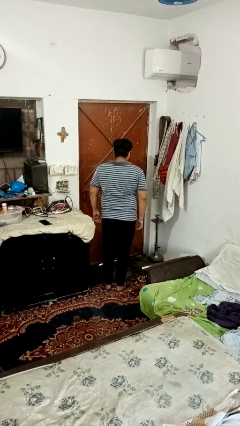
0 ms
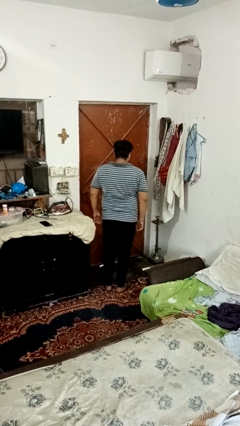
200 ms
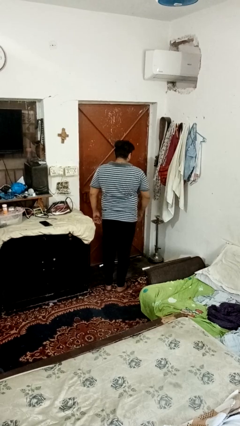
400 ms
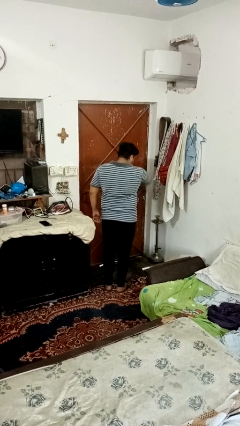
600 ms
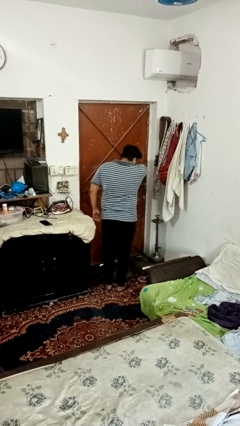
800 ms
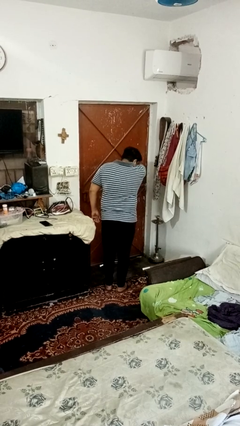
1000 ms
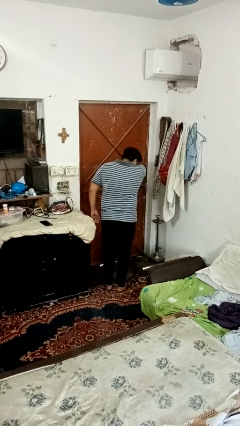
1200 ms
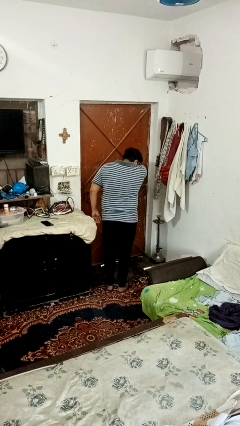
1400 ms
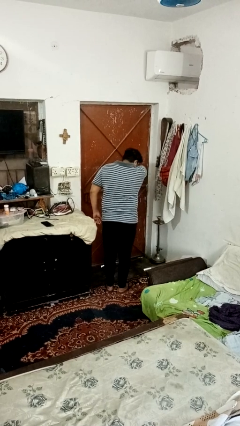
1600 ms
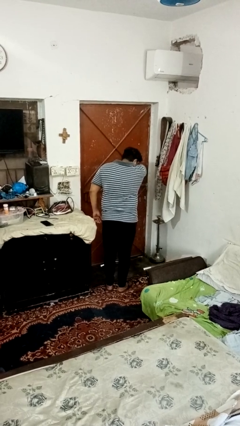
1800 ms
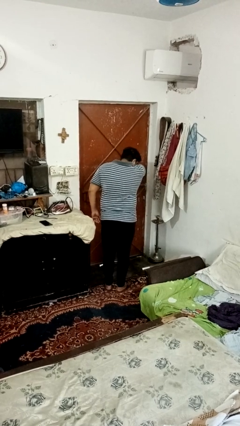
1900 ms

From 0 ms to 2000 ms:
person sneezes into arm

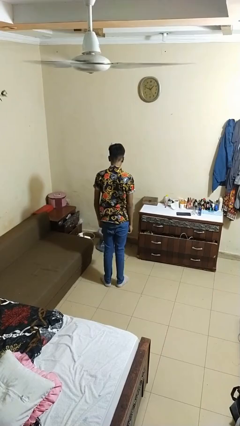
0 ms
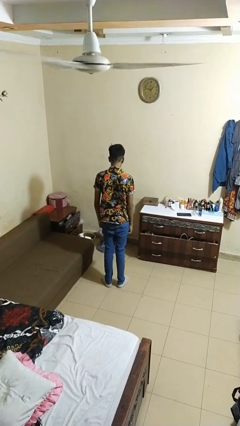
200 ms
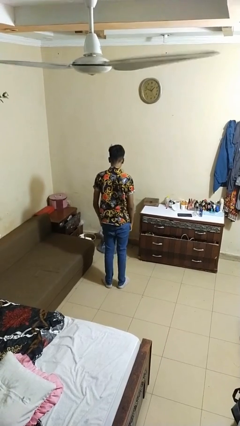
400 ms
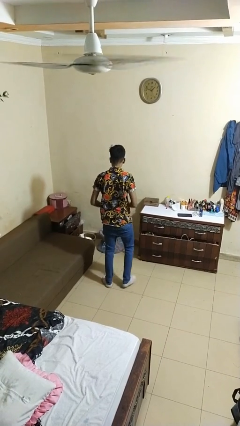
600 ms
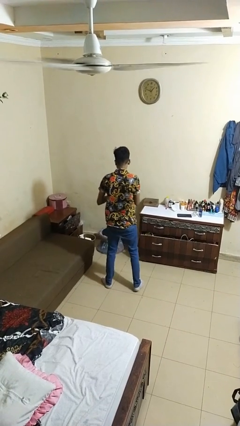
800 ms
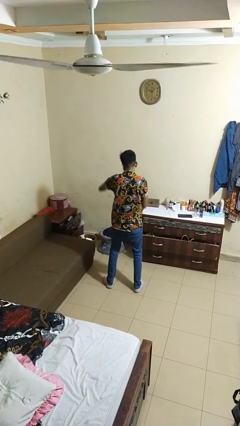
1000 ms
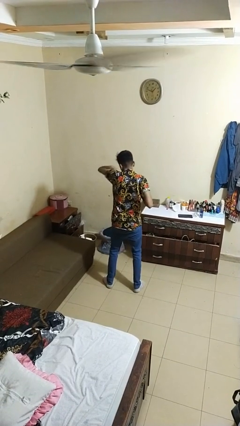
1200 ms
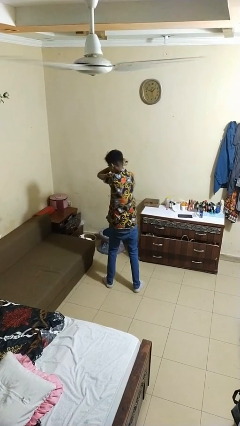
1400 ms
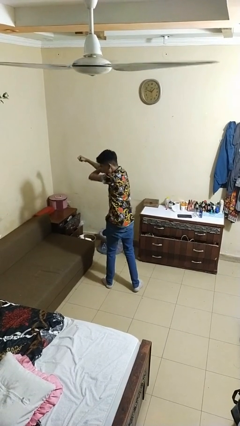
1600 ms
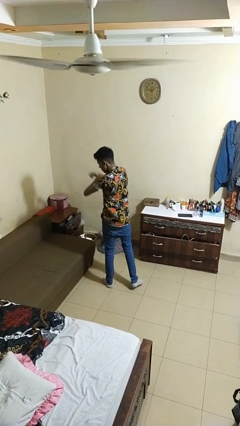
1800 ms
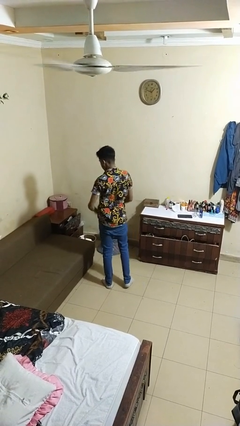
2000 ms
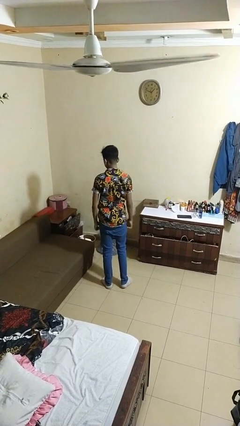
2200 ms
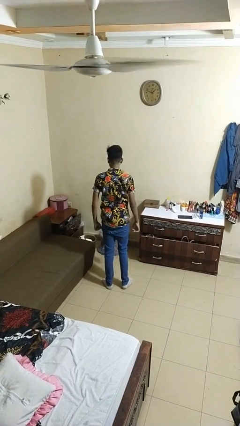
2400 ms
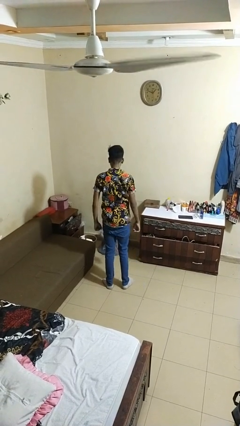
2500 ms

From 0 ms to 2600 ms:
person punches

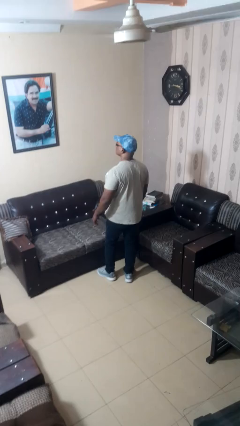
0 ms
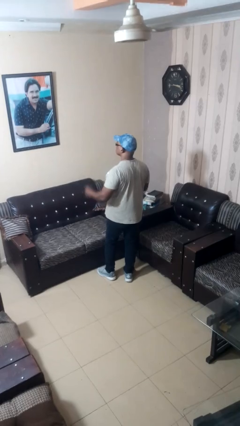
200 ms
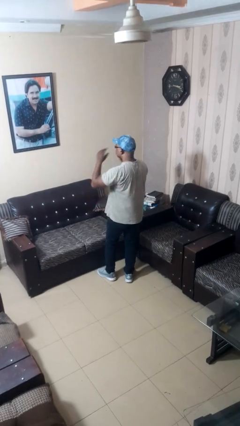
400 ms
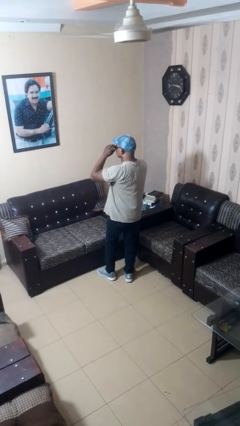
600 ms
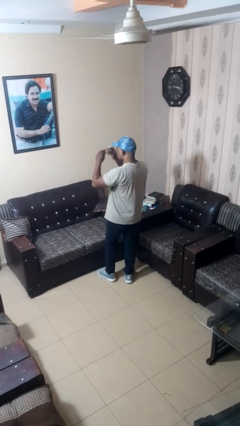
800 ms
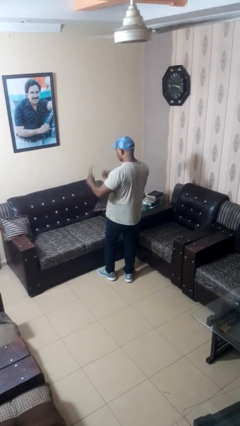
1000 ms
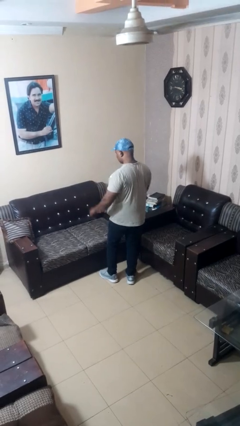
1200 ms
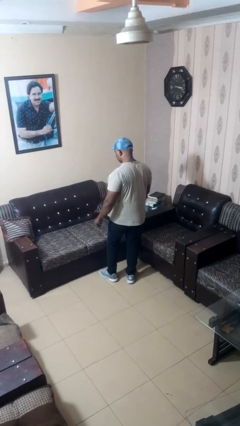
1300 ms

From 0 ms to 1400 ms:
person takes off glasses

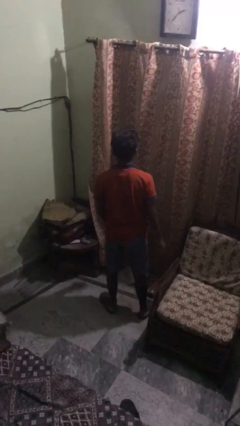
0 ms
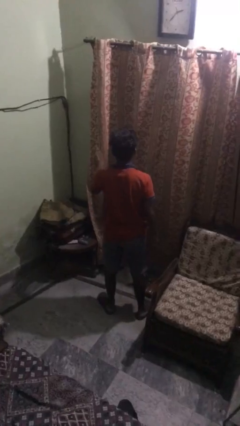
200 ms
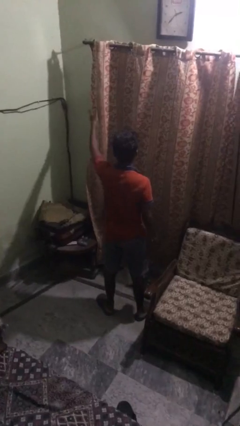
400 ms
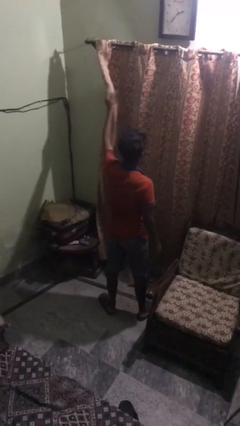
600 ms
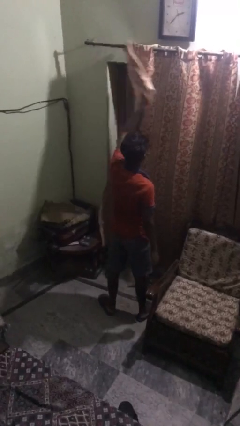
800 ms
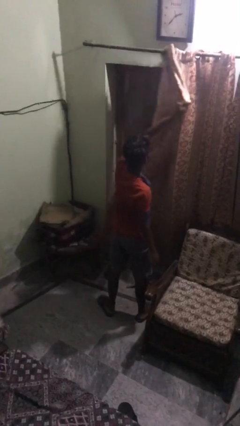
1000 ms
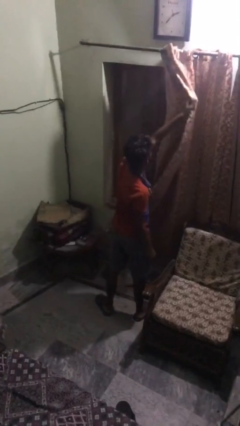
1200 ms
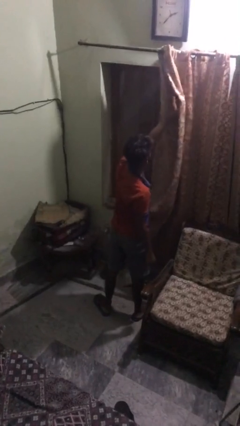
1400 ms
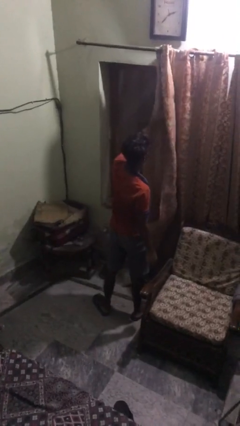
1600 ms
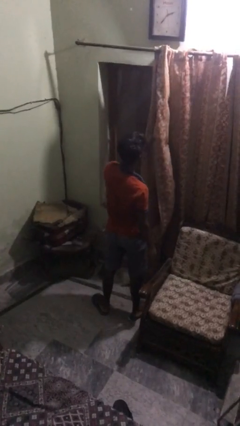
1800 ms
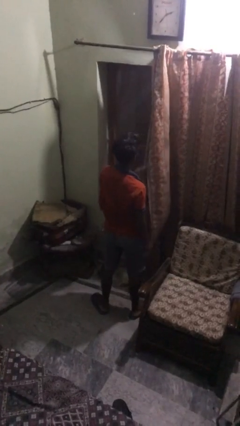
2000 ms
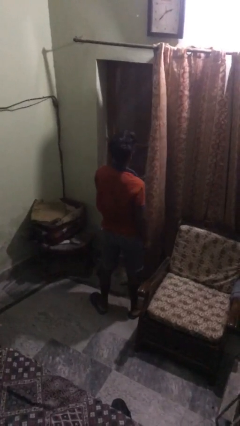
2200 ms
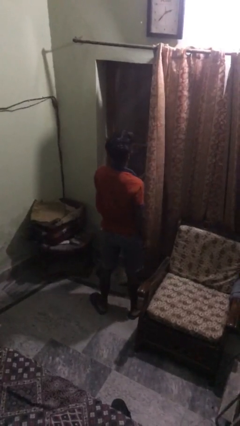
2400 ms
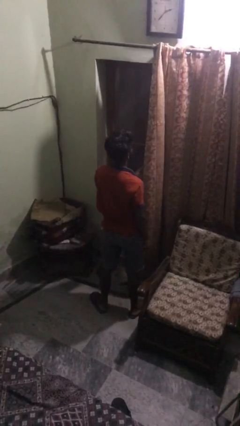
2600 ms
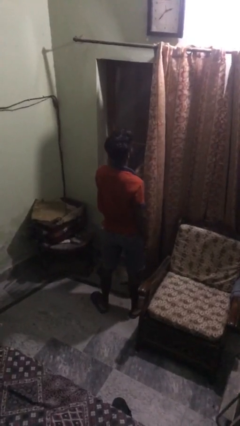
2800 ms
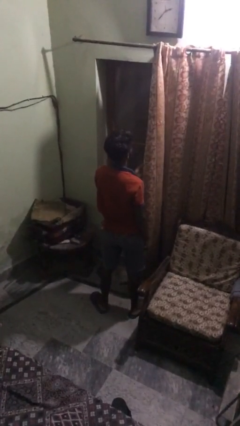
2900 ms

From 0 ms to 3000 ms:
person opens curtains

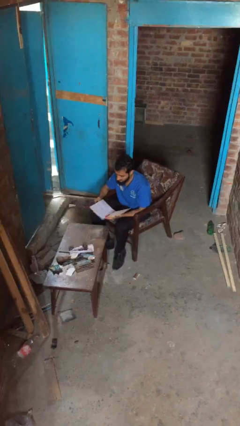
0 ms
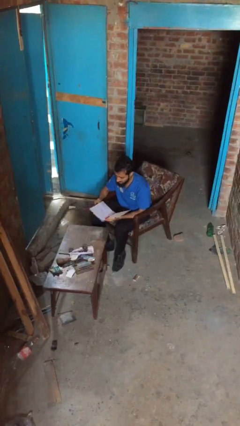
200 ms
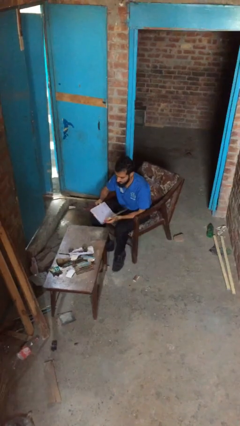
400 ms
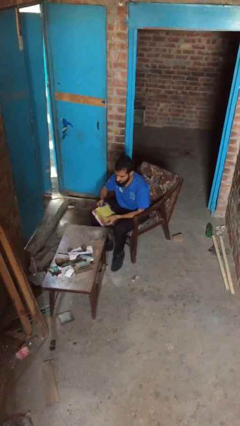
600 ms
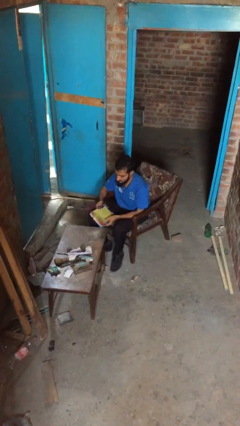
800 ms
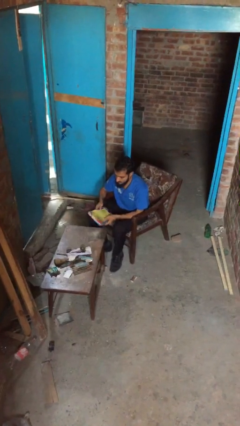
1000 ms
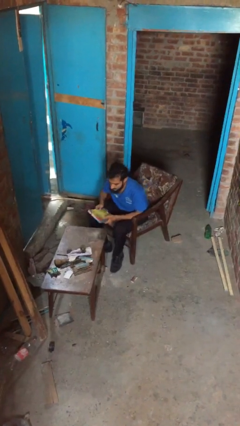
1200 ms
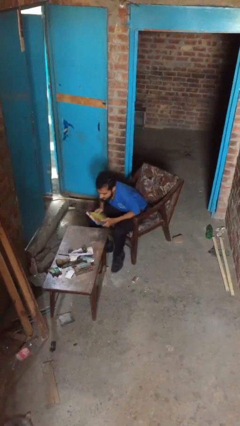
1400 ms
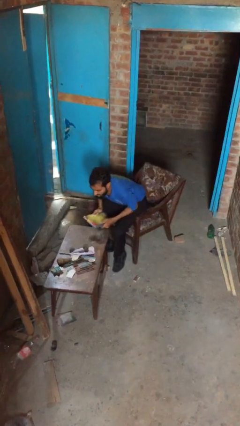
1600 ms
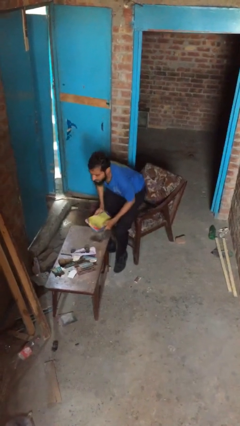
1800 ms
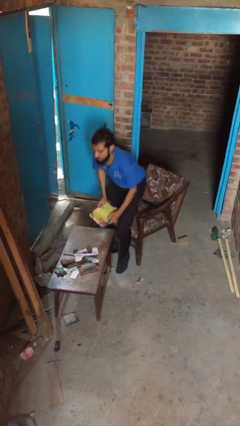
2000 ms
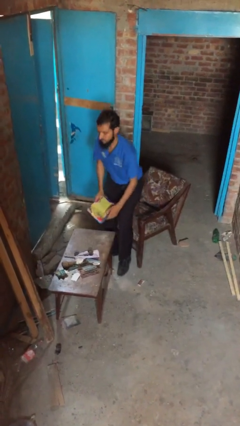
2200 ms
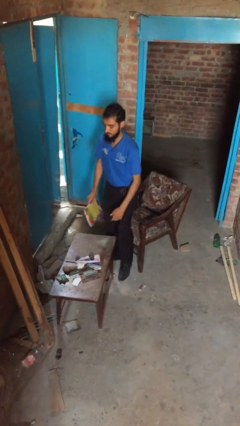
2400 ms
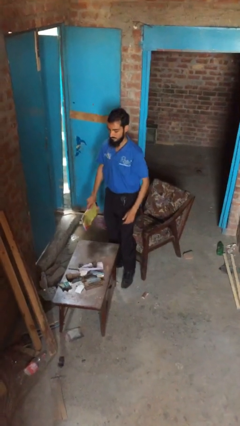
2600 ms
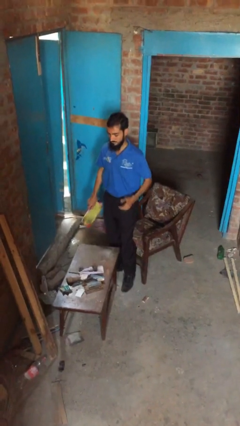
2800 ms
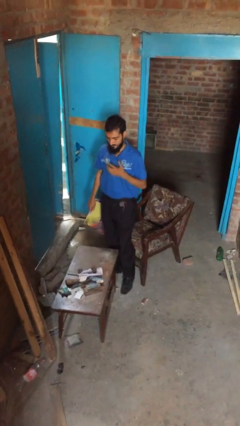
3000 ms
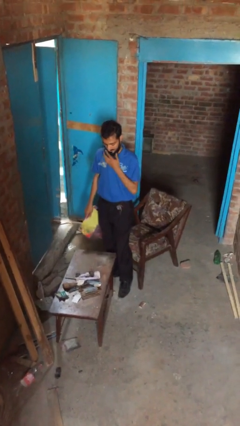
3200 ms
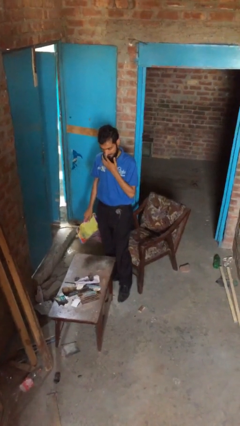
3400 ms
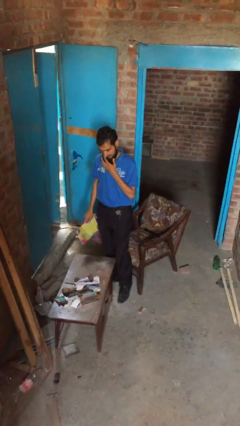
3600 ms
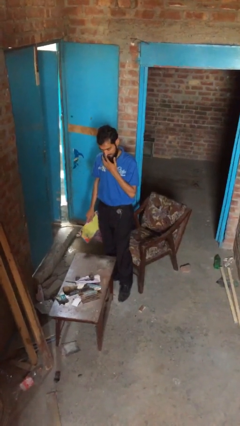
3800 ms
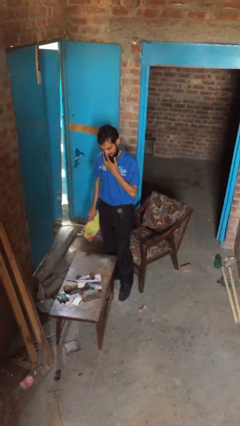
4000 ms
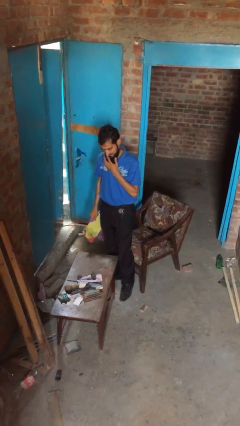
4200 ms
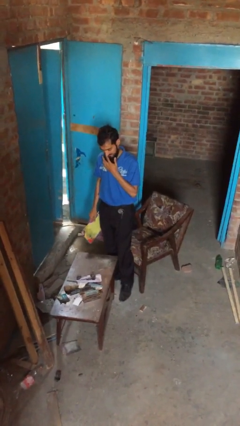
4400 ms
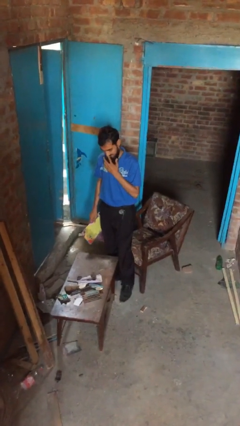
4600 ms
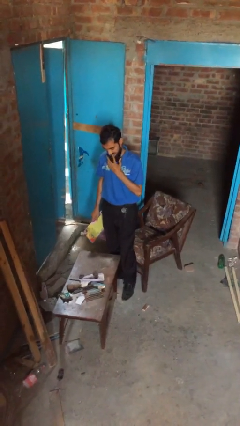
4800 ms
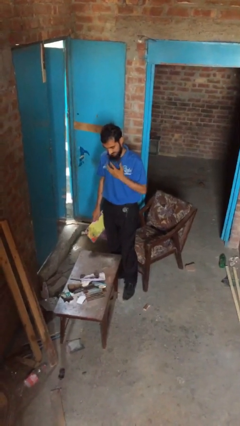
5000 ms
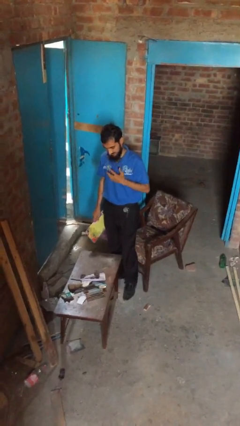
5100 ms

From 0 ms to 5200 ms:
person stands up

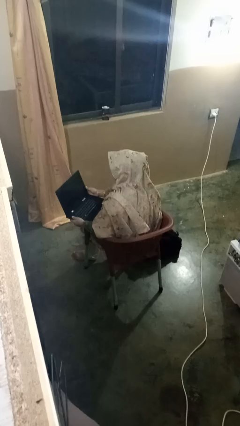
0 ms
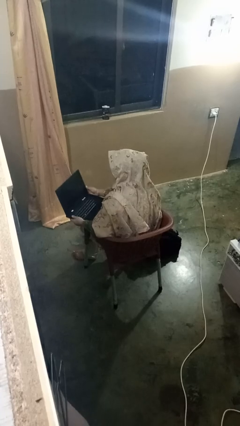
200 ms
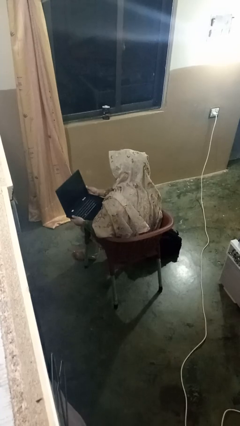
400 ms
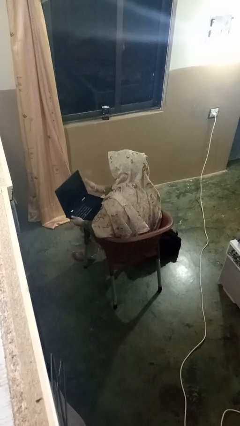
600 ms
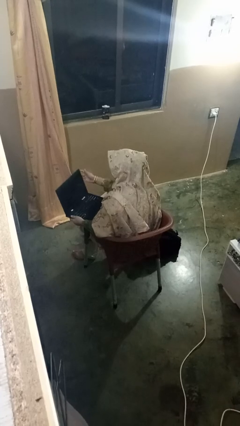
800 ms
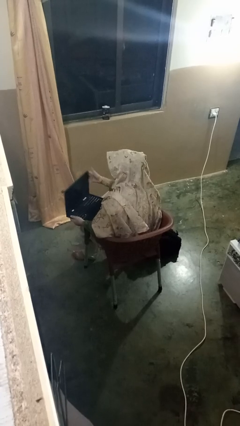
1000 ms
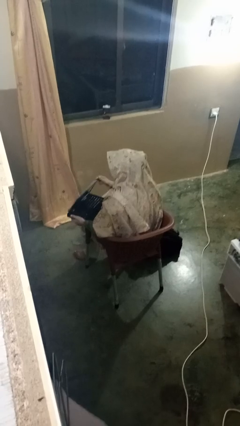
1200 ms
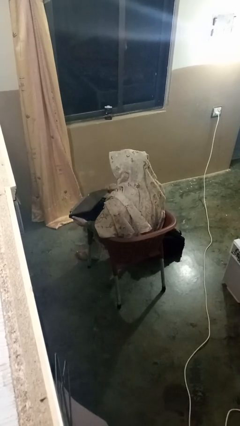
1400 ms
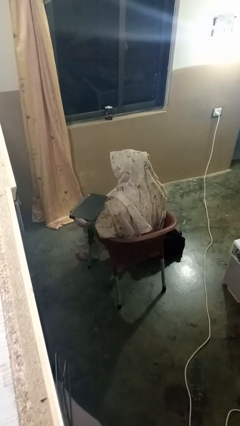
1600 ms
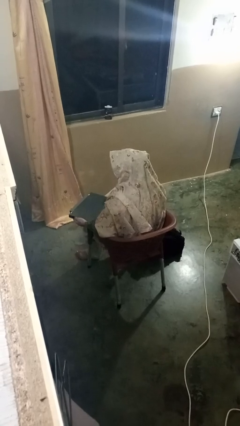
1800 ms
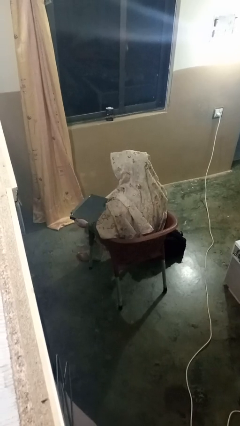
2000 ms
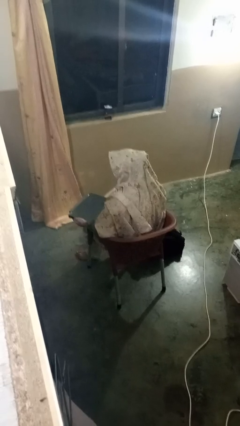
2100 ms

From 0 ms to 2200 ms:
person closes laptop

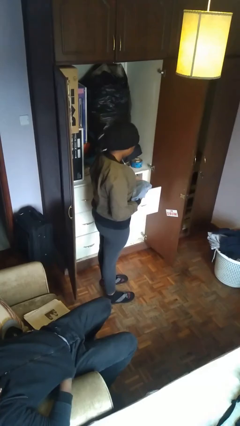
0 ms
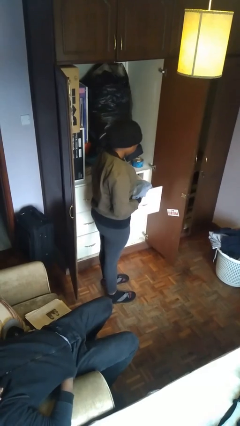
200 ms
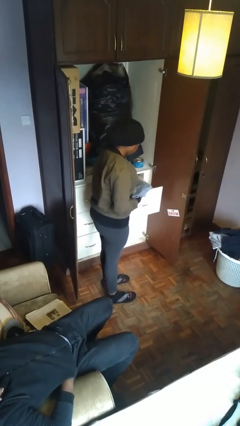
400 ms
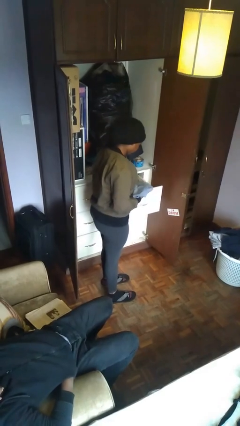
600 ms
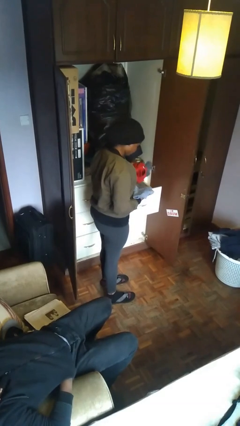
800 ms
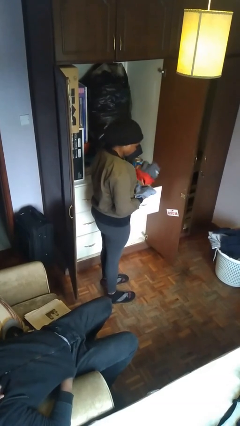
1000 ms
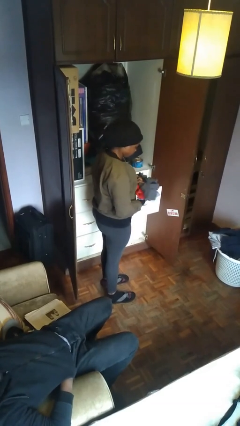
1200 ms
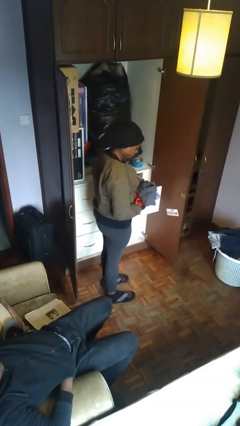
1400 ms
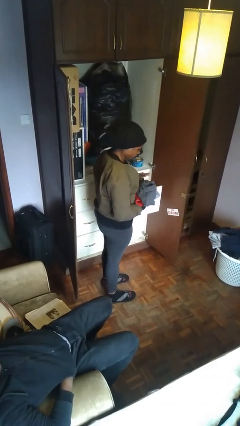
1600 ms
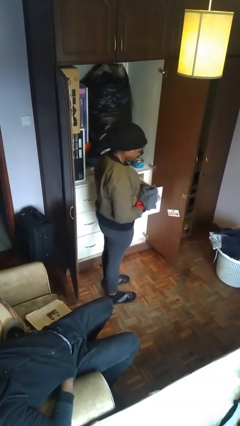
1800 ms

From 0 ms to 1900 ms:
person takes clothes from dresser
